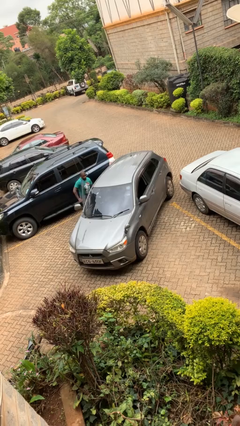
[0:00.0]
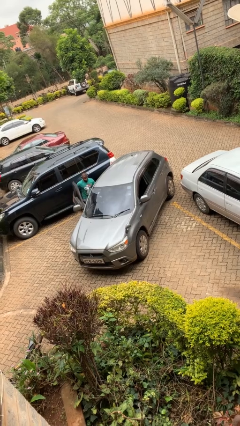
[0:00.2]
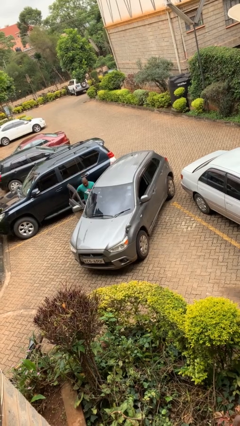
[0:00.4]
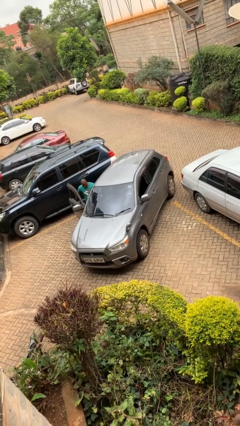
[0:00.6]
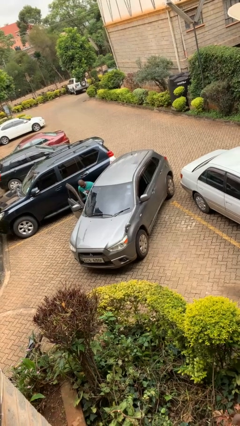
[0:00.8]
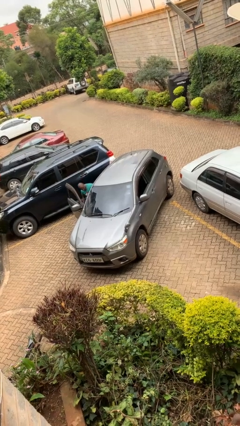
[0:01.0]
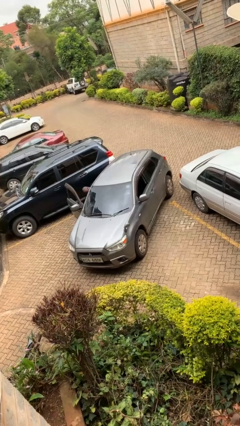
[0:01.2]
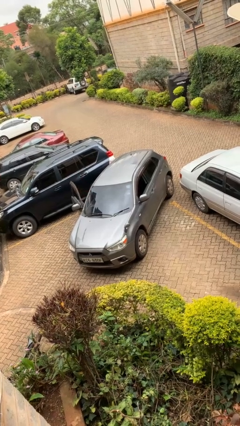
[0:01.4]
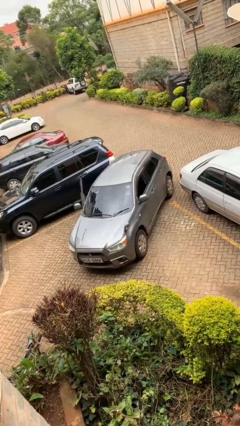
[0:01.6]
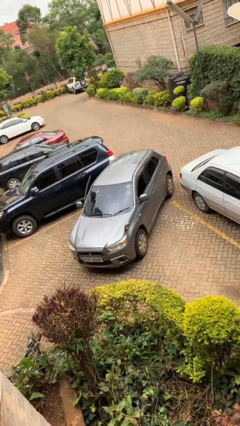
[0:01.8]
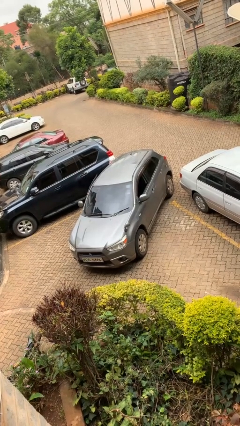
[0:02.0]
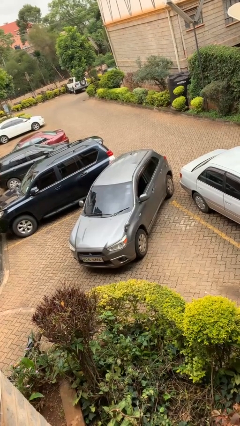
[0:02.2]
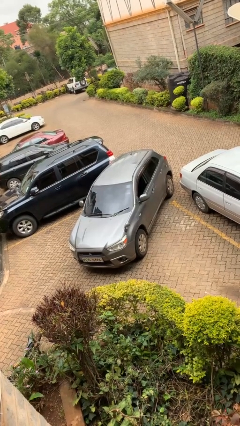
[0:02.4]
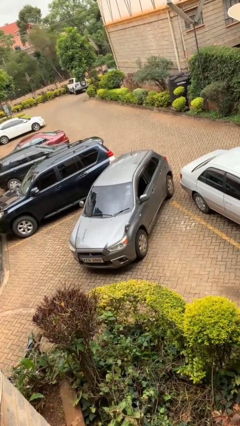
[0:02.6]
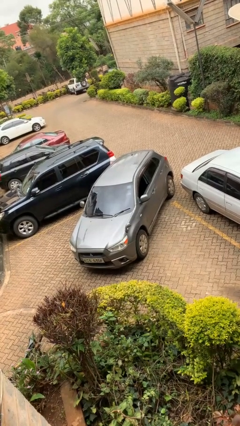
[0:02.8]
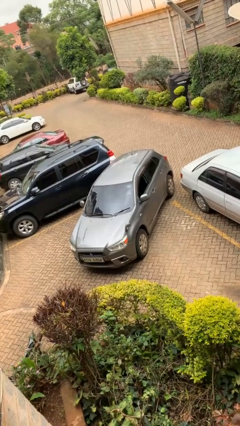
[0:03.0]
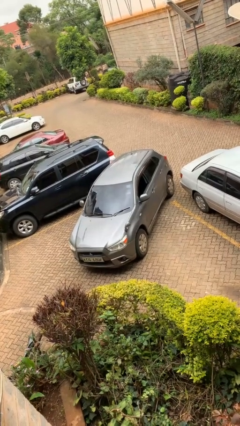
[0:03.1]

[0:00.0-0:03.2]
car picks up person

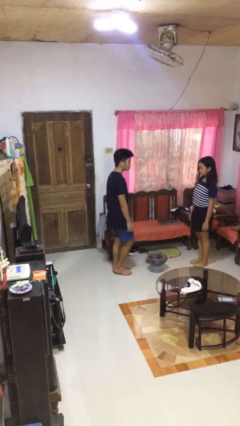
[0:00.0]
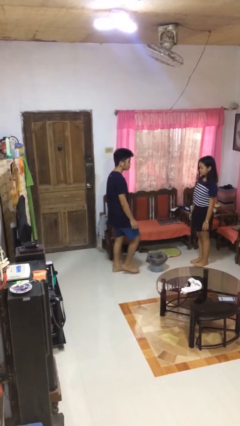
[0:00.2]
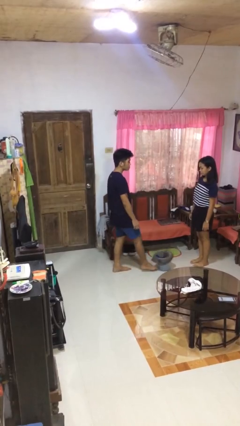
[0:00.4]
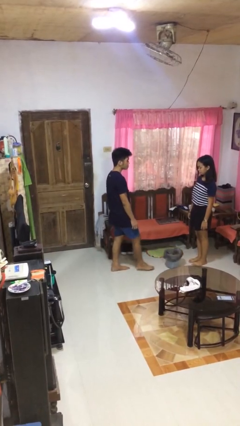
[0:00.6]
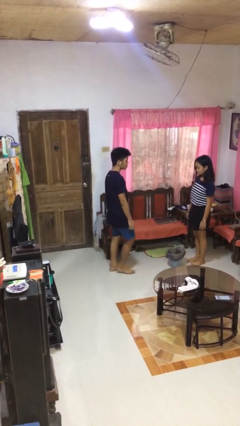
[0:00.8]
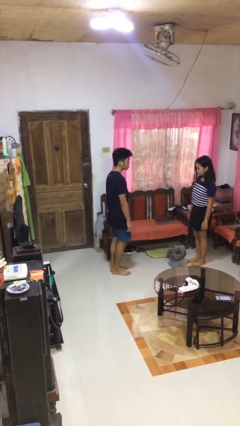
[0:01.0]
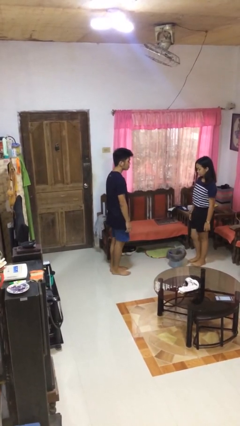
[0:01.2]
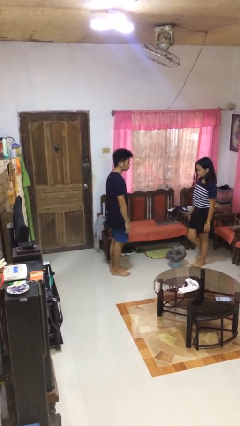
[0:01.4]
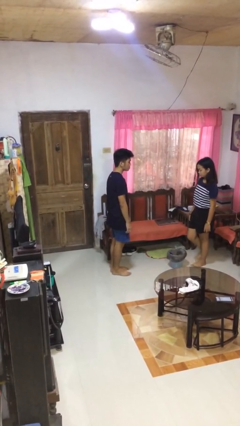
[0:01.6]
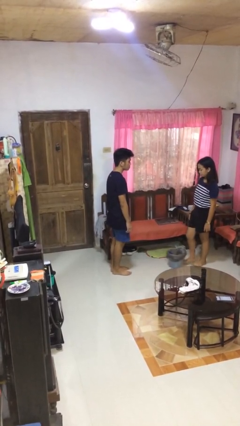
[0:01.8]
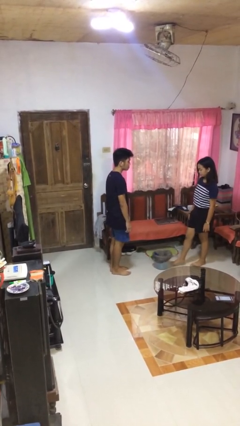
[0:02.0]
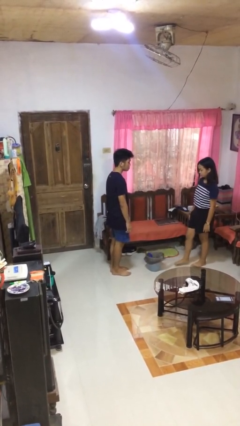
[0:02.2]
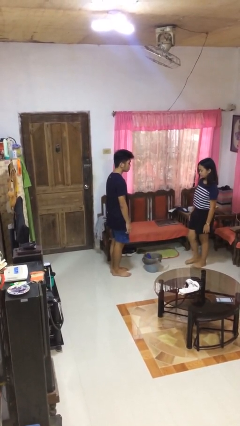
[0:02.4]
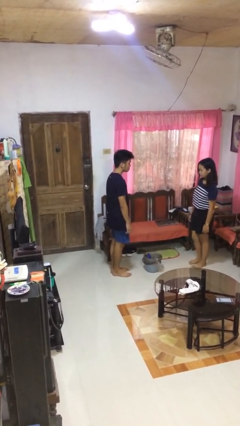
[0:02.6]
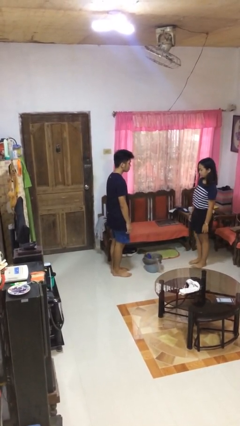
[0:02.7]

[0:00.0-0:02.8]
person kicks object to person

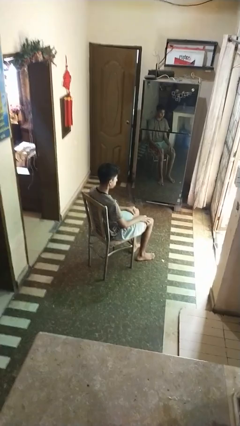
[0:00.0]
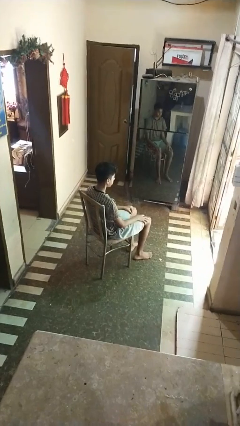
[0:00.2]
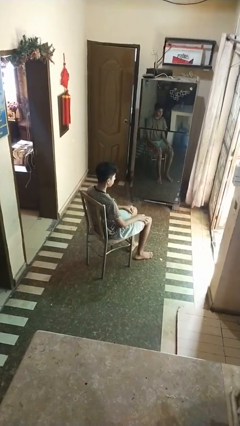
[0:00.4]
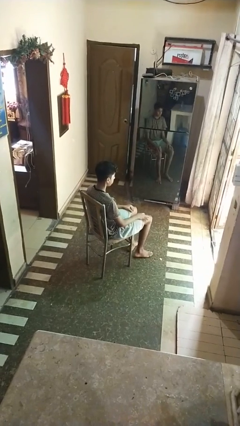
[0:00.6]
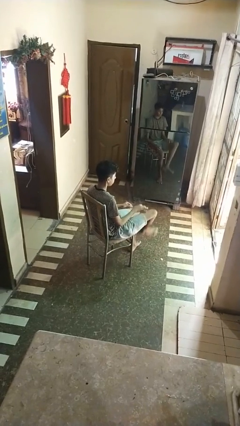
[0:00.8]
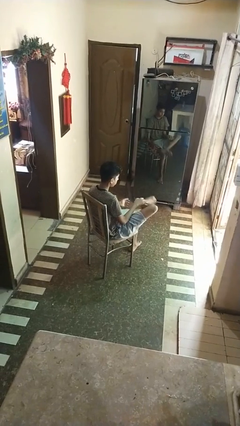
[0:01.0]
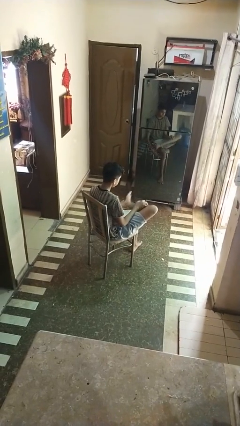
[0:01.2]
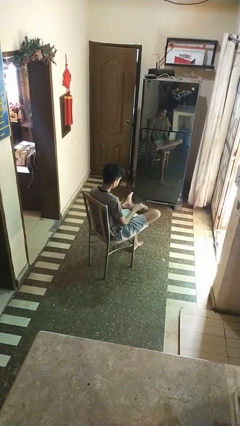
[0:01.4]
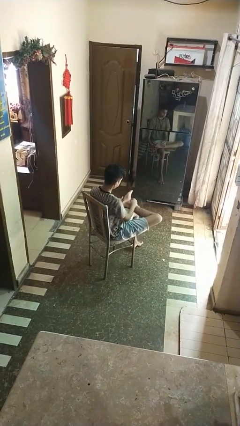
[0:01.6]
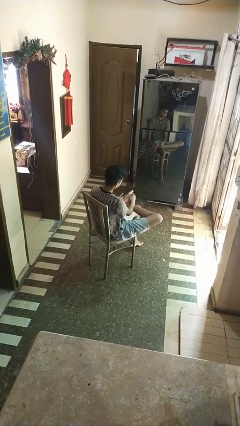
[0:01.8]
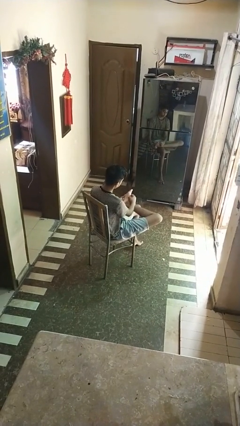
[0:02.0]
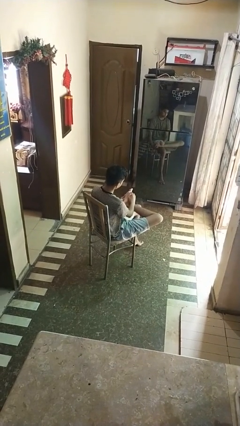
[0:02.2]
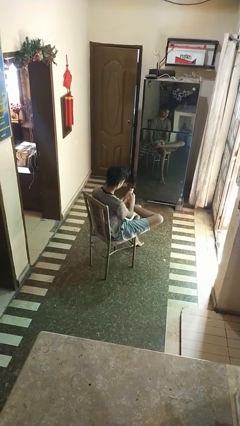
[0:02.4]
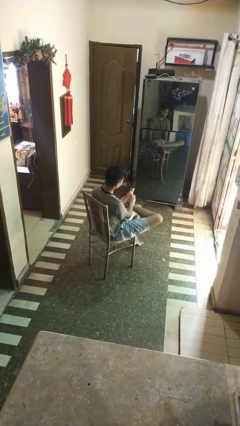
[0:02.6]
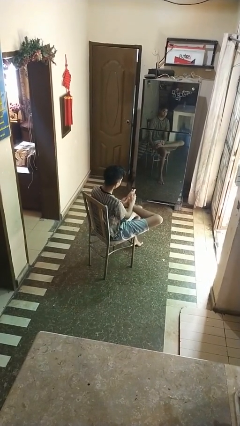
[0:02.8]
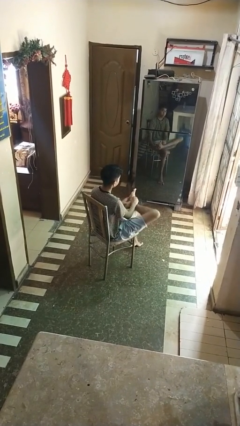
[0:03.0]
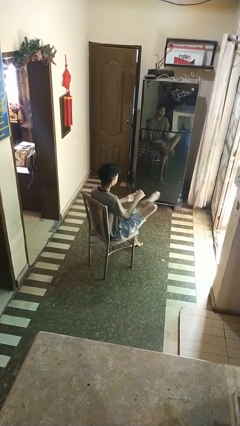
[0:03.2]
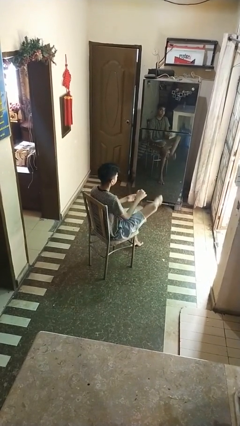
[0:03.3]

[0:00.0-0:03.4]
person rubs foot

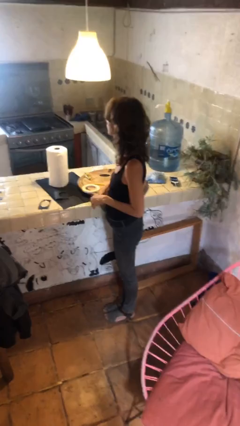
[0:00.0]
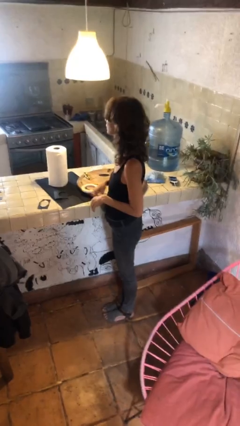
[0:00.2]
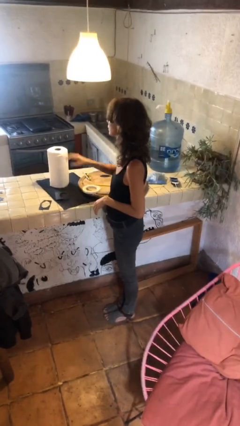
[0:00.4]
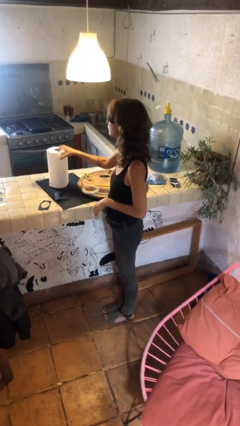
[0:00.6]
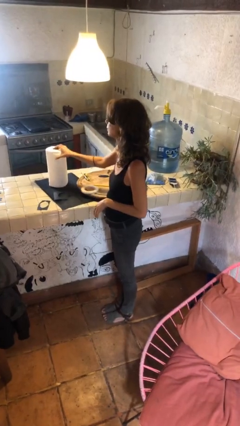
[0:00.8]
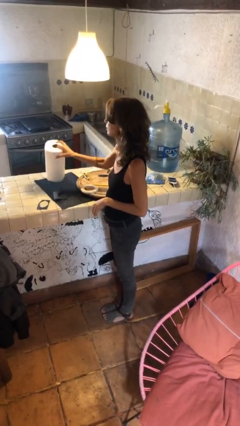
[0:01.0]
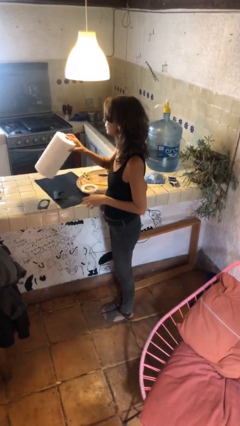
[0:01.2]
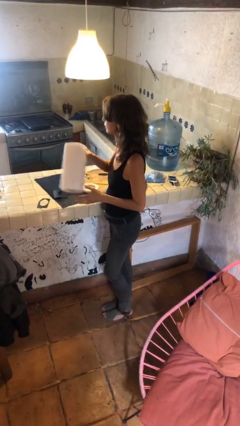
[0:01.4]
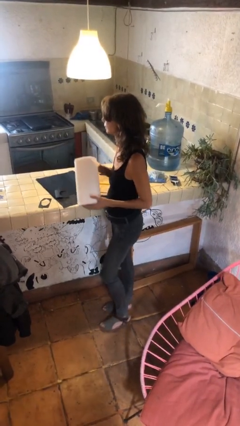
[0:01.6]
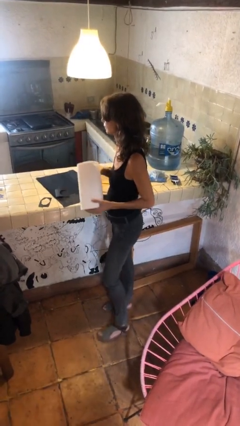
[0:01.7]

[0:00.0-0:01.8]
person picks up object from countertop

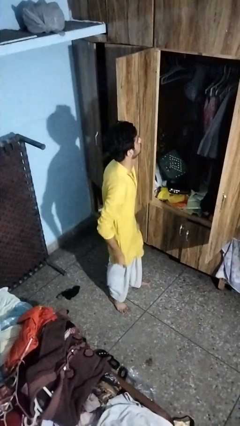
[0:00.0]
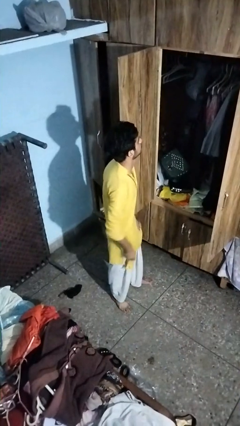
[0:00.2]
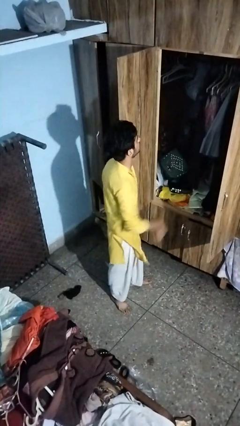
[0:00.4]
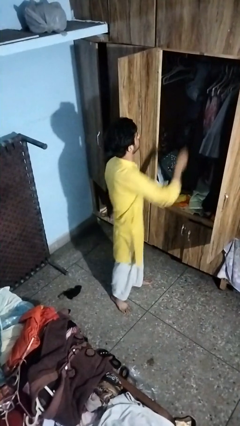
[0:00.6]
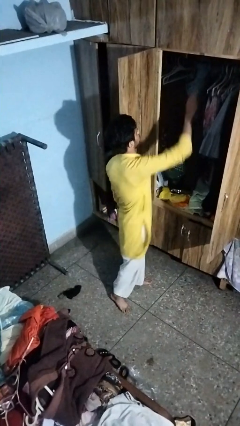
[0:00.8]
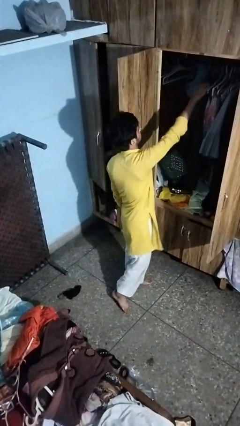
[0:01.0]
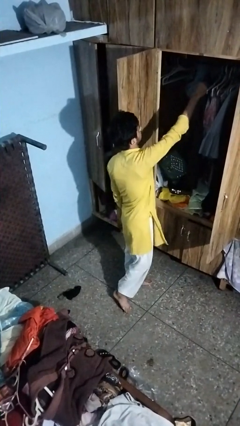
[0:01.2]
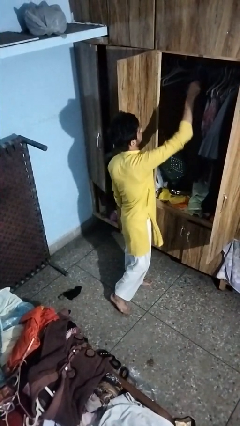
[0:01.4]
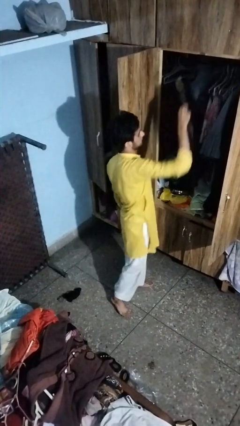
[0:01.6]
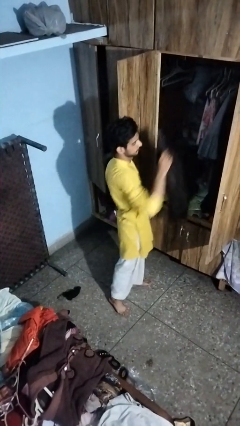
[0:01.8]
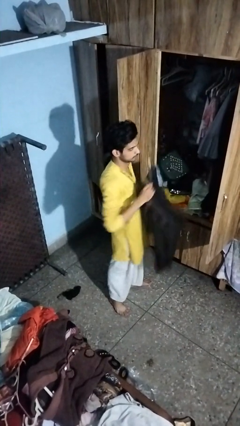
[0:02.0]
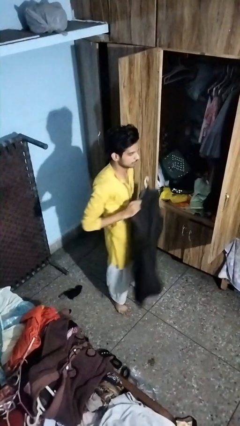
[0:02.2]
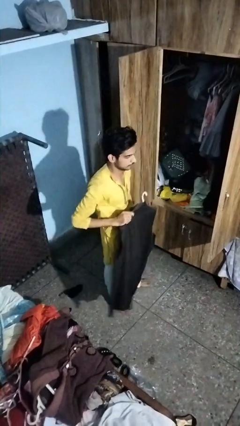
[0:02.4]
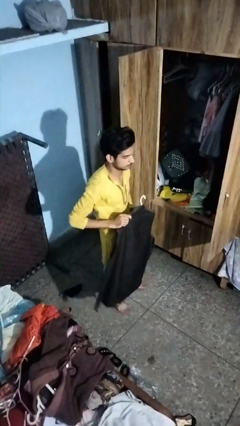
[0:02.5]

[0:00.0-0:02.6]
person takes clothes from closet

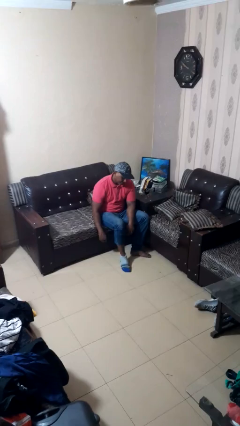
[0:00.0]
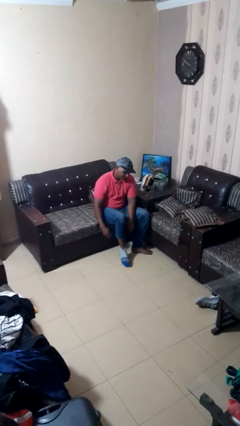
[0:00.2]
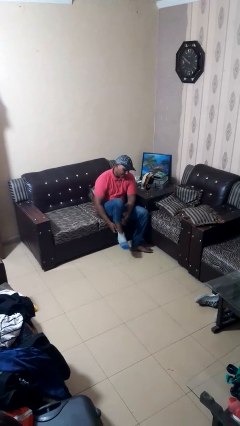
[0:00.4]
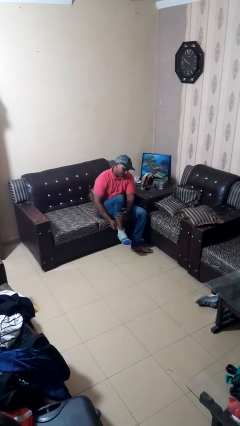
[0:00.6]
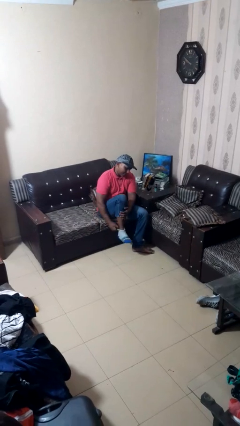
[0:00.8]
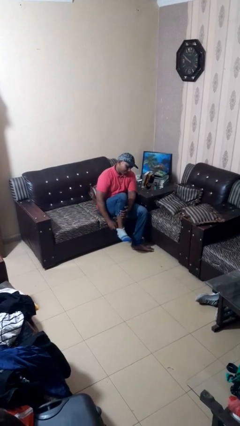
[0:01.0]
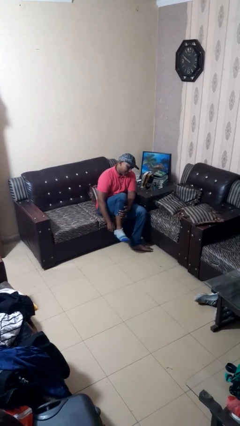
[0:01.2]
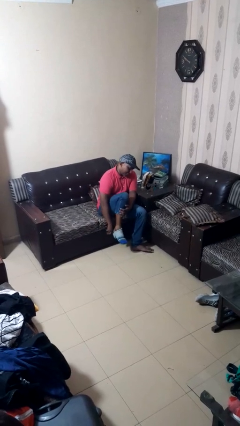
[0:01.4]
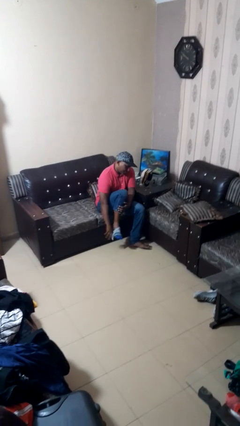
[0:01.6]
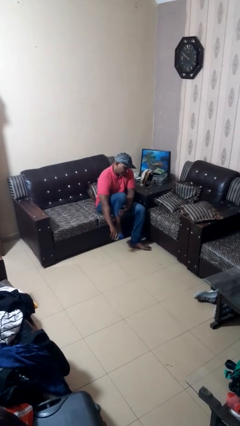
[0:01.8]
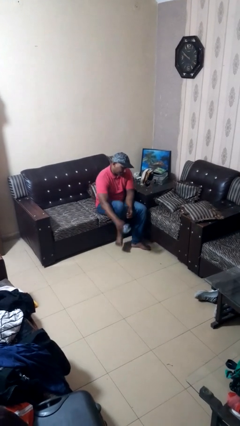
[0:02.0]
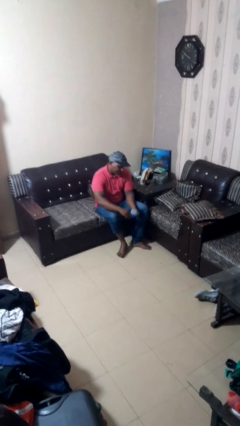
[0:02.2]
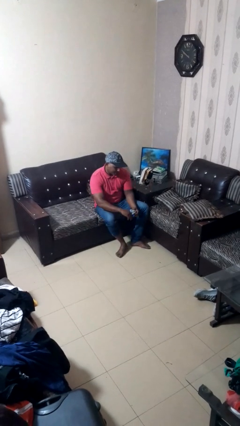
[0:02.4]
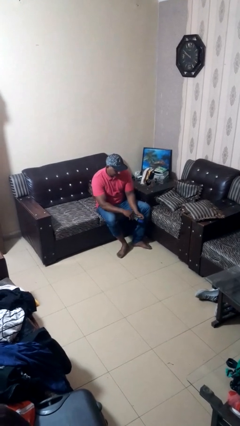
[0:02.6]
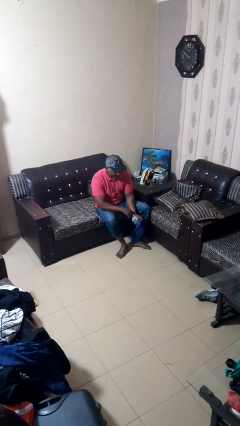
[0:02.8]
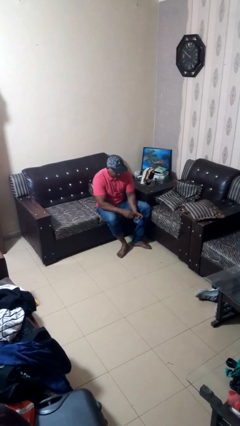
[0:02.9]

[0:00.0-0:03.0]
person takes off socks

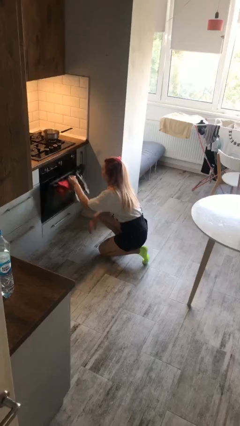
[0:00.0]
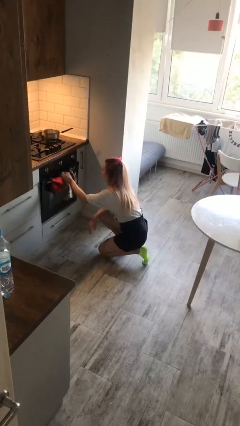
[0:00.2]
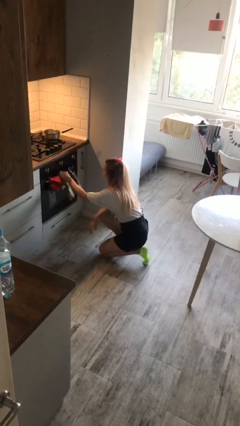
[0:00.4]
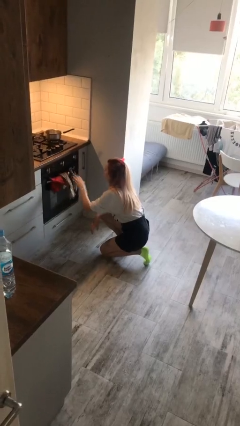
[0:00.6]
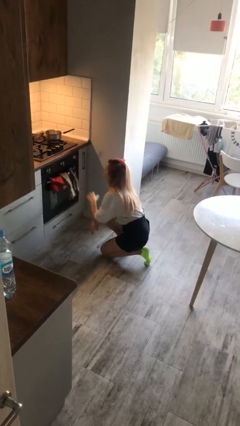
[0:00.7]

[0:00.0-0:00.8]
person closes oven door
